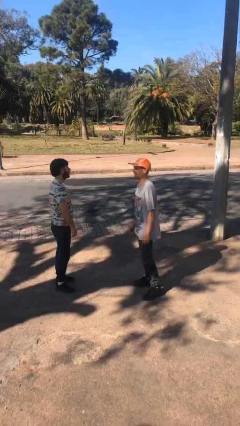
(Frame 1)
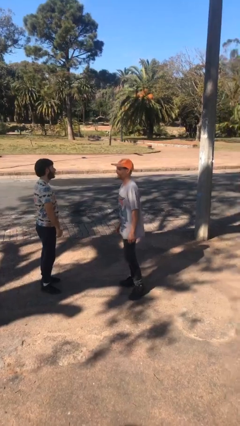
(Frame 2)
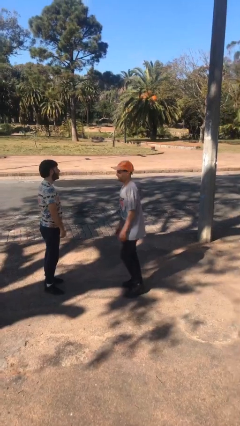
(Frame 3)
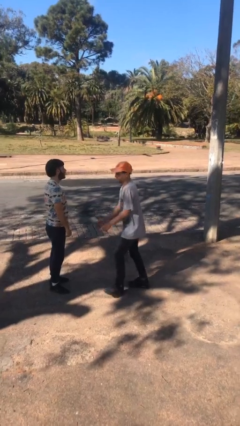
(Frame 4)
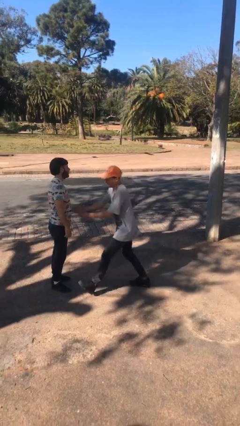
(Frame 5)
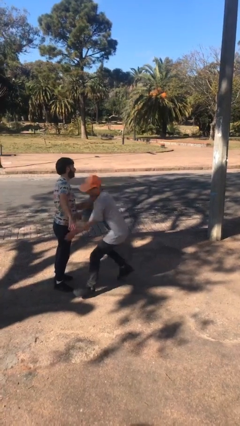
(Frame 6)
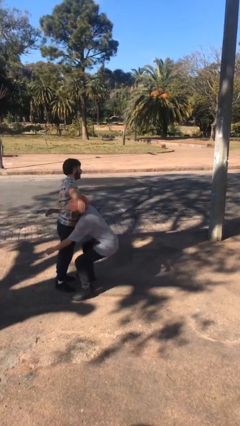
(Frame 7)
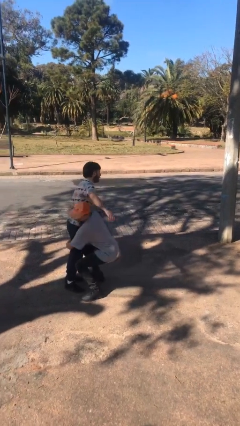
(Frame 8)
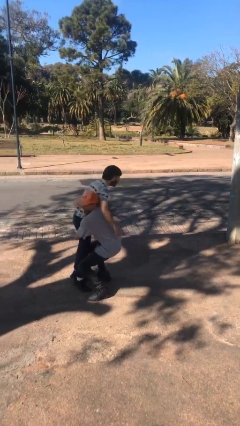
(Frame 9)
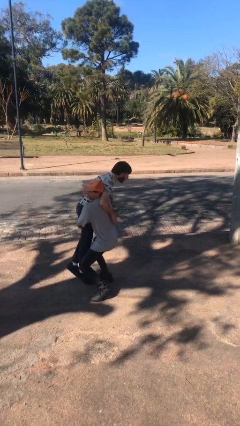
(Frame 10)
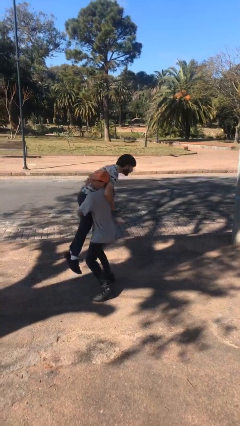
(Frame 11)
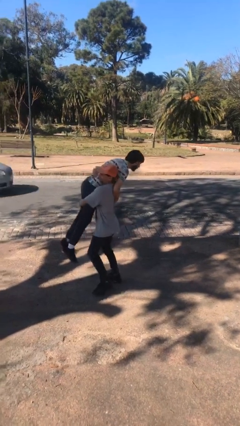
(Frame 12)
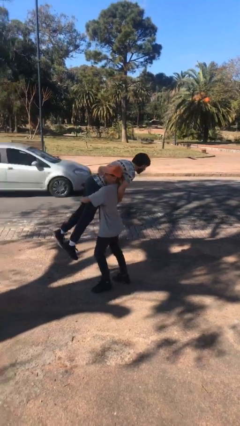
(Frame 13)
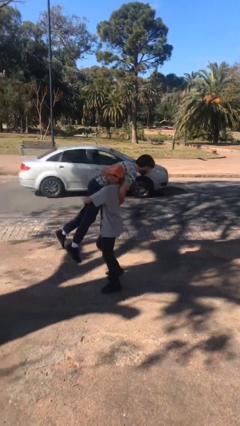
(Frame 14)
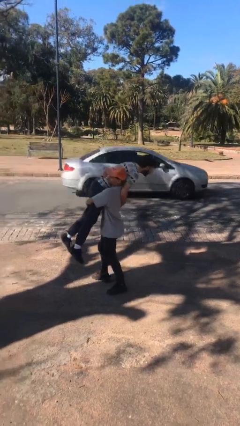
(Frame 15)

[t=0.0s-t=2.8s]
person carries person over shoulder

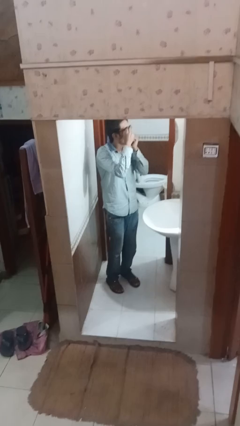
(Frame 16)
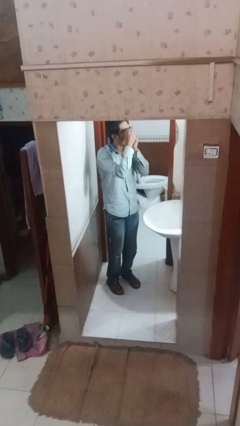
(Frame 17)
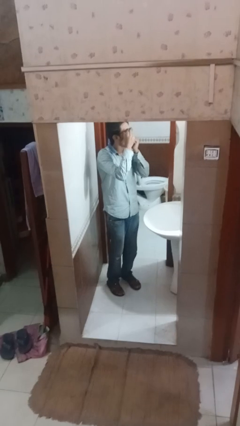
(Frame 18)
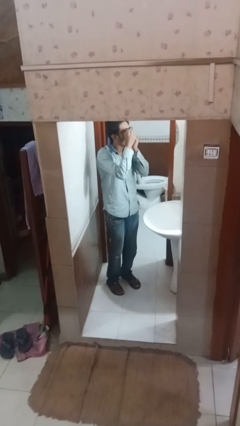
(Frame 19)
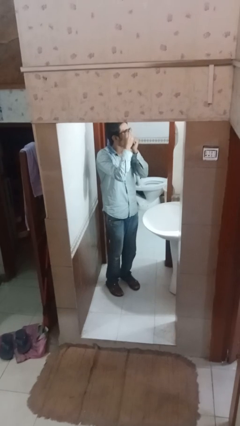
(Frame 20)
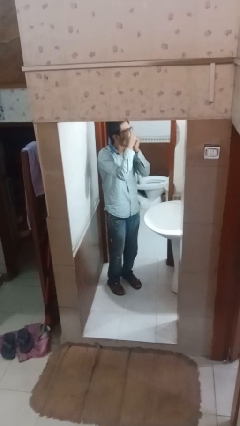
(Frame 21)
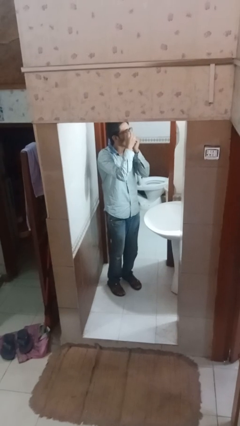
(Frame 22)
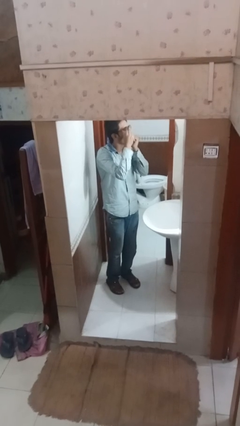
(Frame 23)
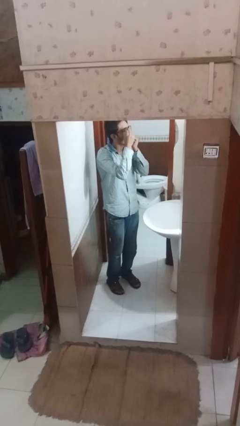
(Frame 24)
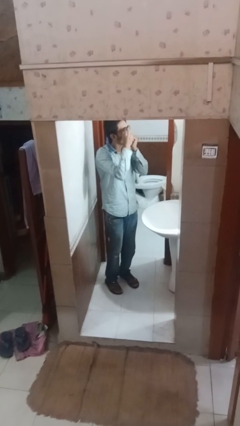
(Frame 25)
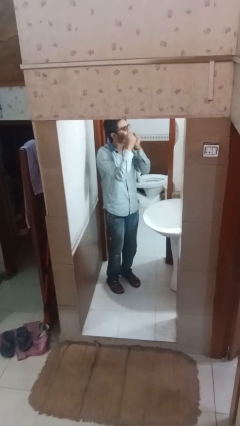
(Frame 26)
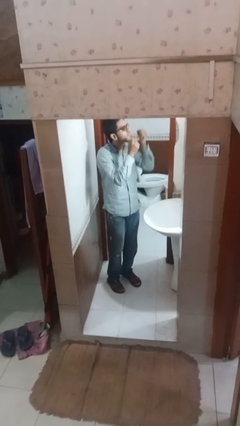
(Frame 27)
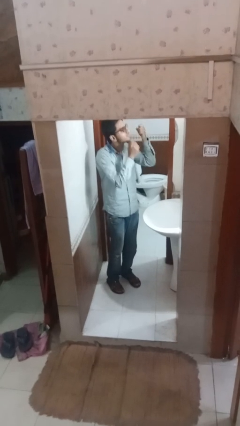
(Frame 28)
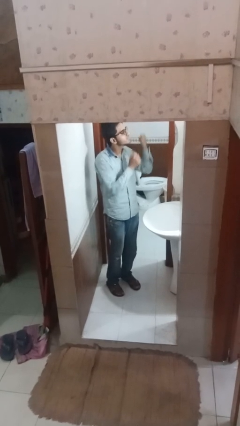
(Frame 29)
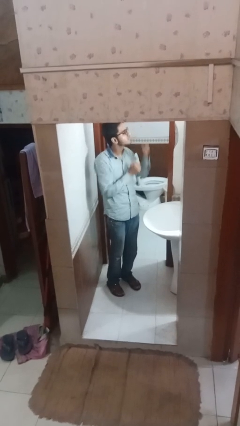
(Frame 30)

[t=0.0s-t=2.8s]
person flosses

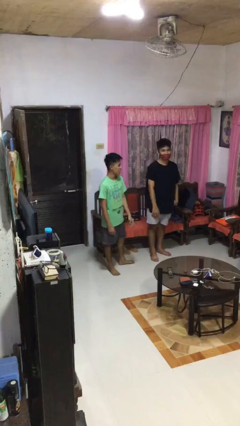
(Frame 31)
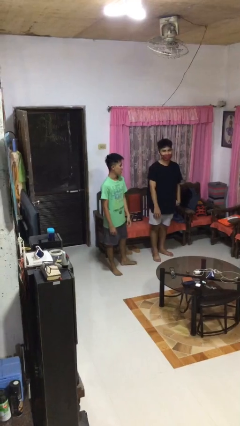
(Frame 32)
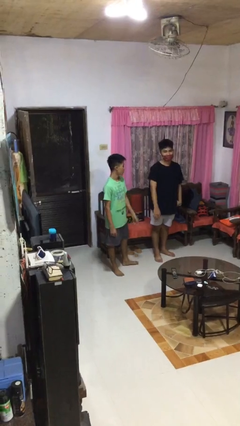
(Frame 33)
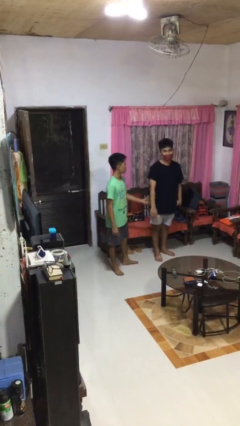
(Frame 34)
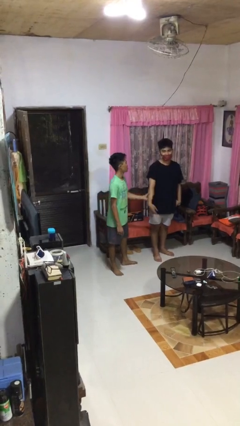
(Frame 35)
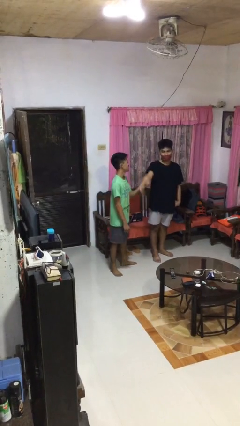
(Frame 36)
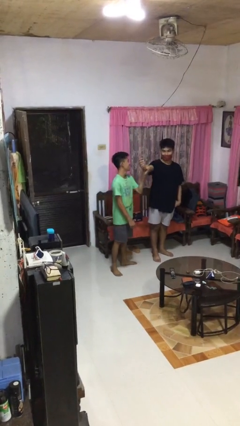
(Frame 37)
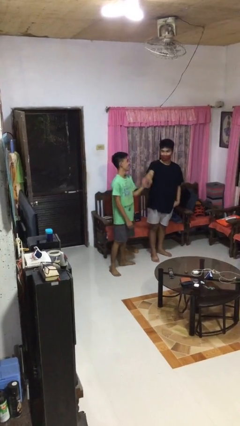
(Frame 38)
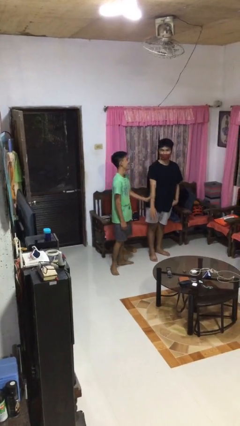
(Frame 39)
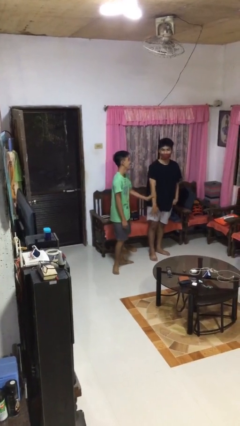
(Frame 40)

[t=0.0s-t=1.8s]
person grabs person by forearm

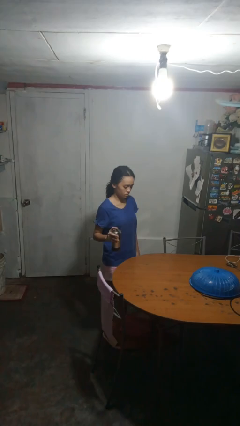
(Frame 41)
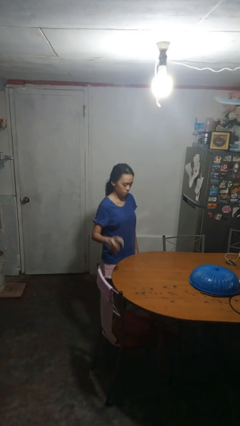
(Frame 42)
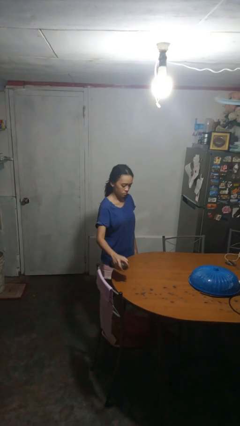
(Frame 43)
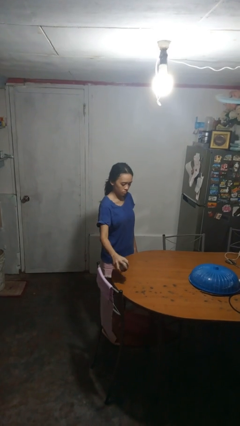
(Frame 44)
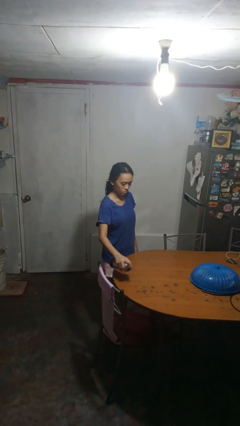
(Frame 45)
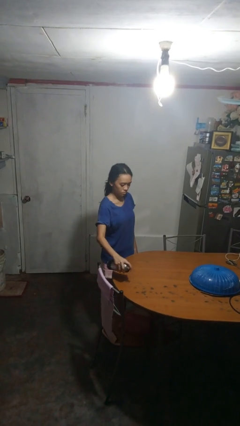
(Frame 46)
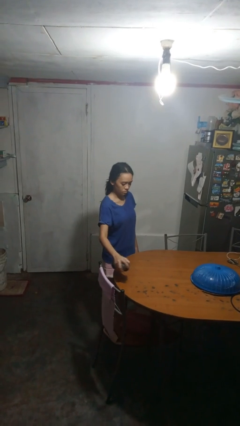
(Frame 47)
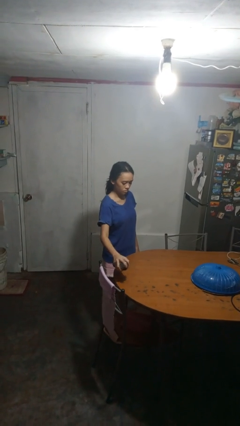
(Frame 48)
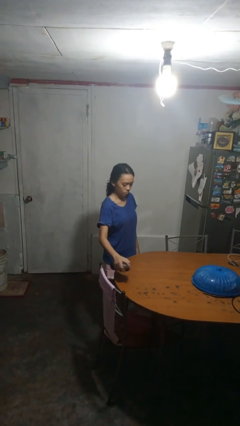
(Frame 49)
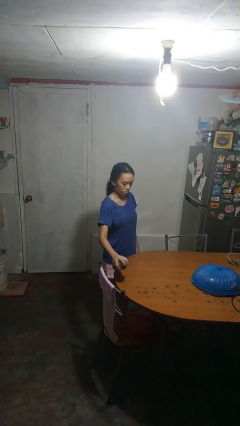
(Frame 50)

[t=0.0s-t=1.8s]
person sprays from bottle

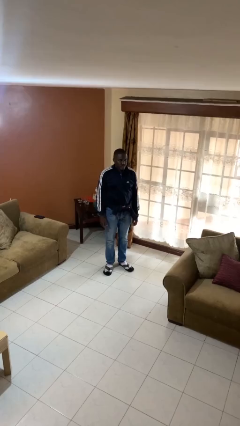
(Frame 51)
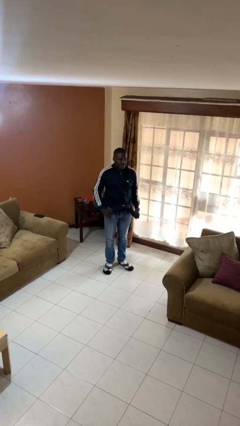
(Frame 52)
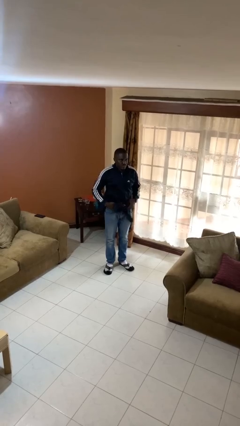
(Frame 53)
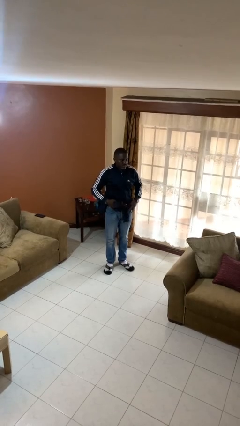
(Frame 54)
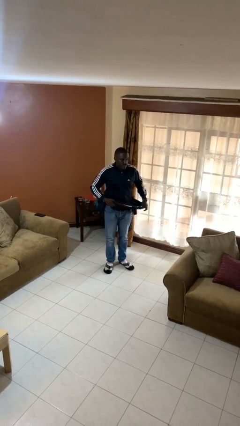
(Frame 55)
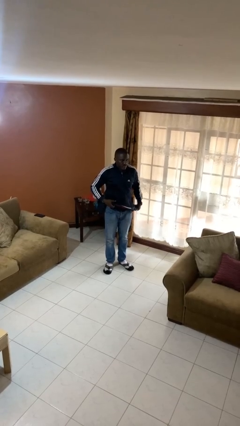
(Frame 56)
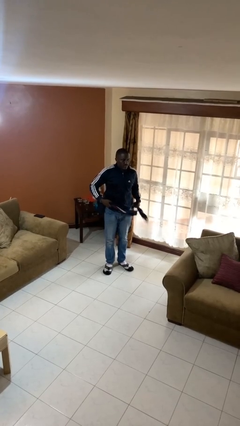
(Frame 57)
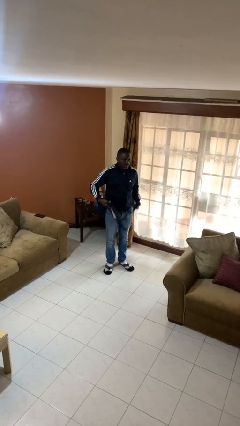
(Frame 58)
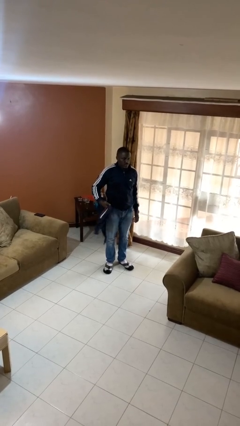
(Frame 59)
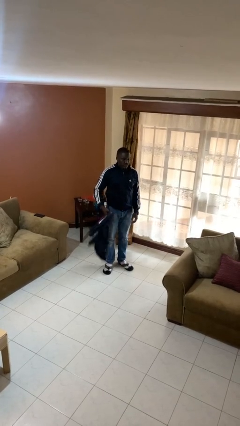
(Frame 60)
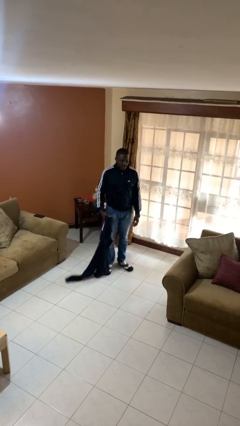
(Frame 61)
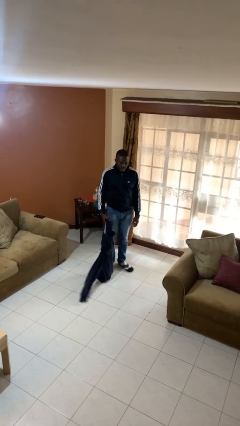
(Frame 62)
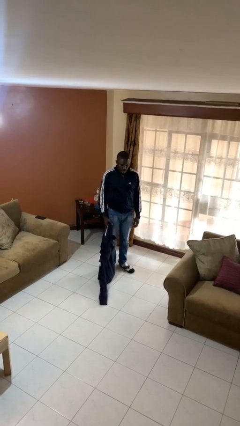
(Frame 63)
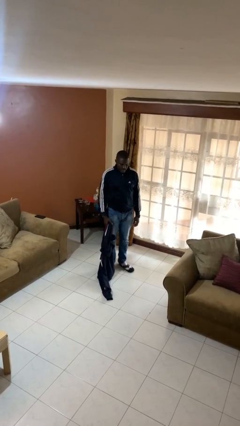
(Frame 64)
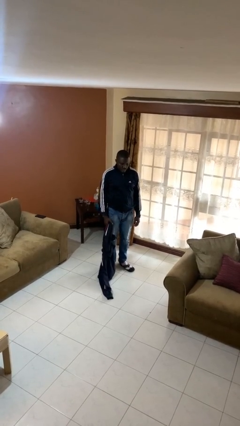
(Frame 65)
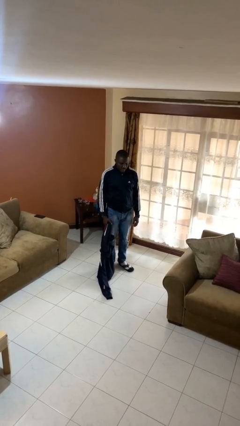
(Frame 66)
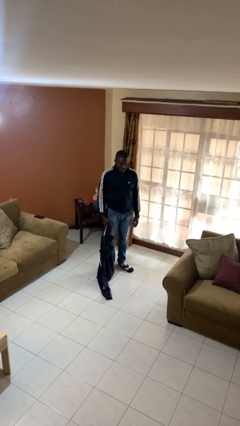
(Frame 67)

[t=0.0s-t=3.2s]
person unties jacket around waist

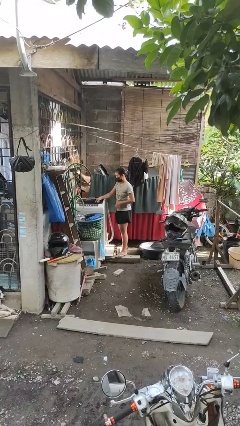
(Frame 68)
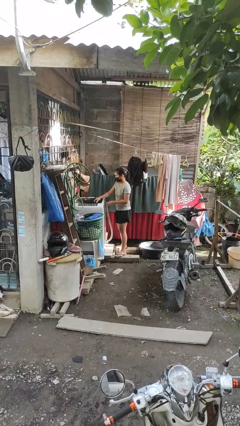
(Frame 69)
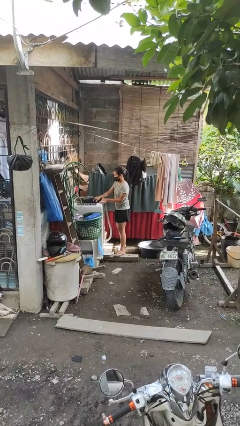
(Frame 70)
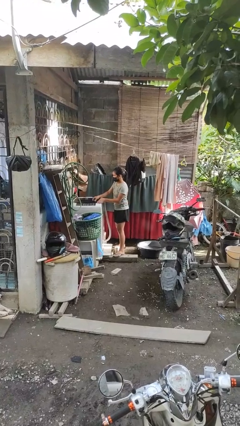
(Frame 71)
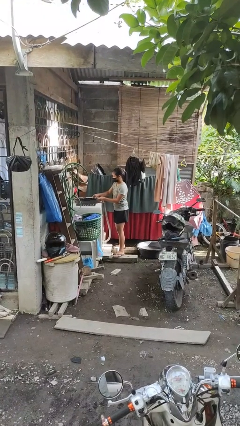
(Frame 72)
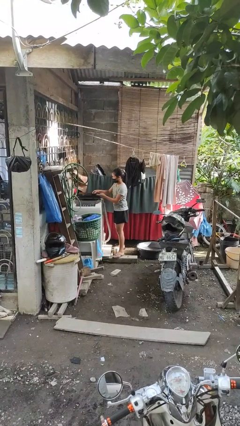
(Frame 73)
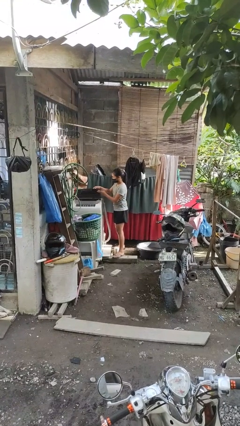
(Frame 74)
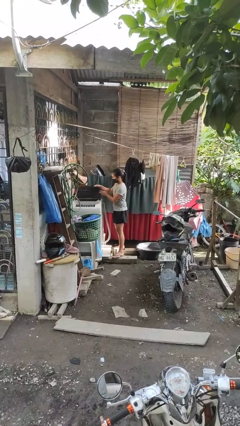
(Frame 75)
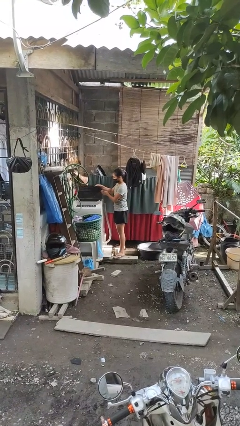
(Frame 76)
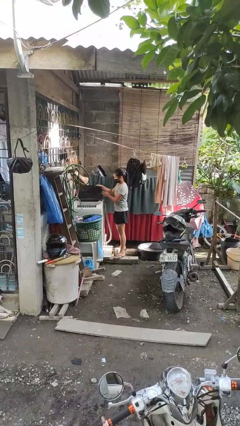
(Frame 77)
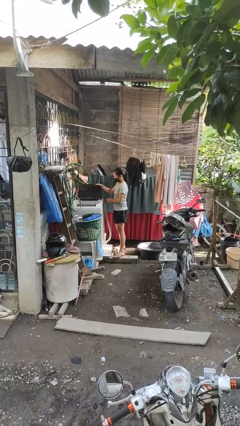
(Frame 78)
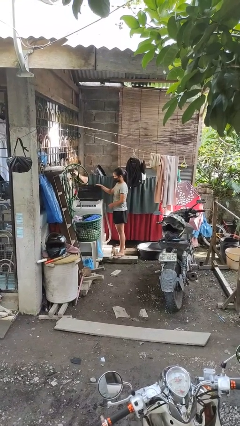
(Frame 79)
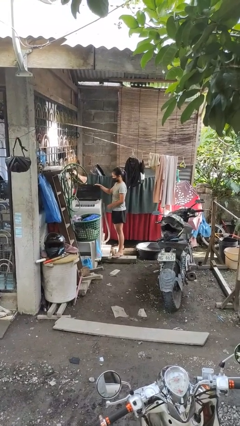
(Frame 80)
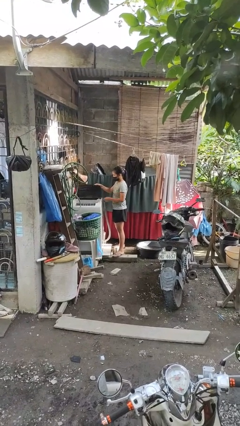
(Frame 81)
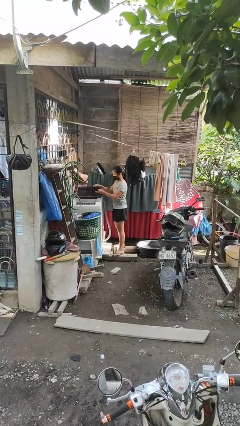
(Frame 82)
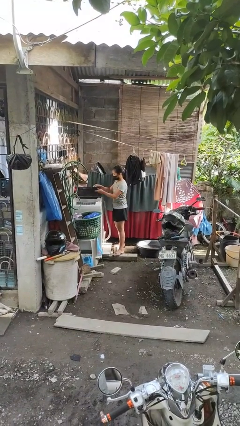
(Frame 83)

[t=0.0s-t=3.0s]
person opens clothes washer

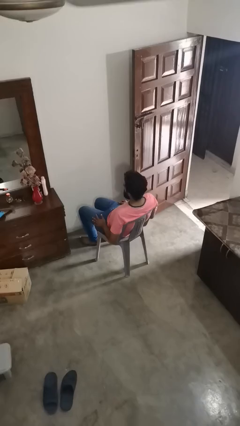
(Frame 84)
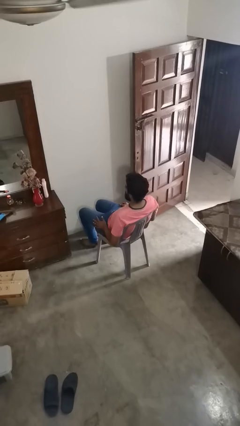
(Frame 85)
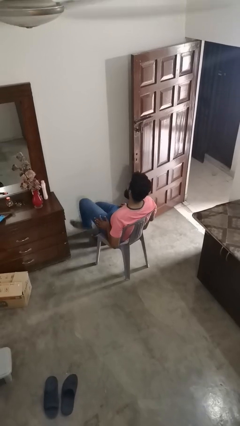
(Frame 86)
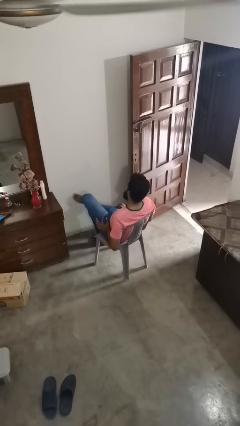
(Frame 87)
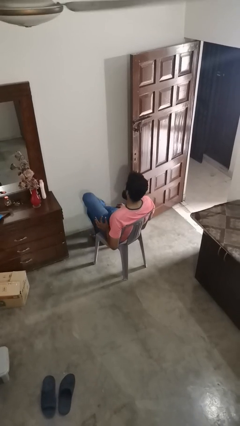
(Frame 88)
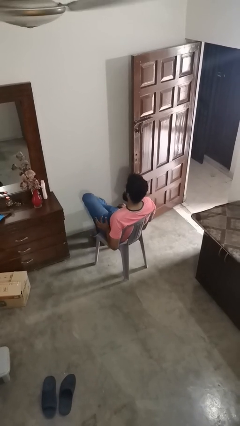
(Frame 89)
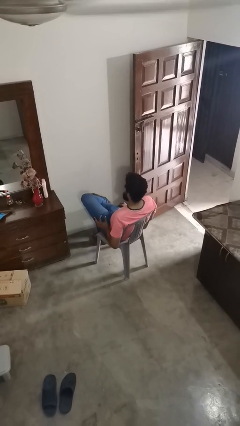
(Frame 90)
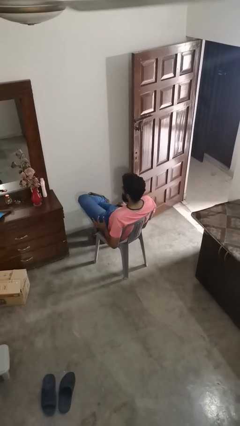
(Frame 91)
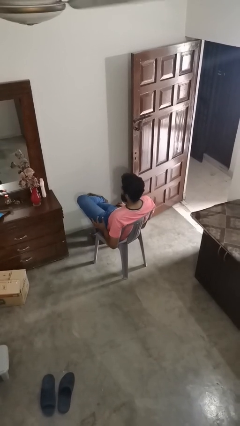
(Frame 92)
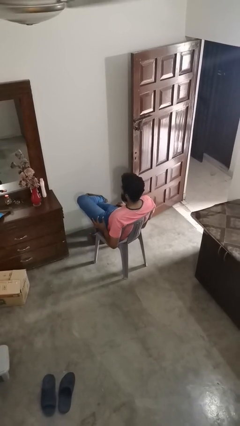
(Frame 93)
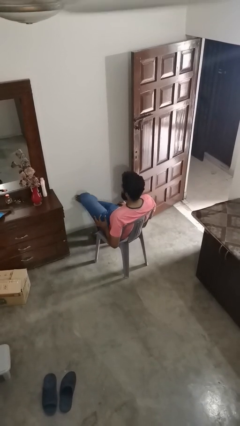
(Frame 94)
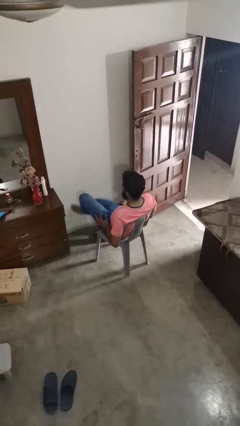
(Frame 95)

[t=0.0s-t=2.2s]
person crosses legs
